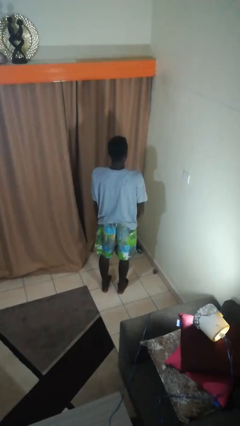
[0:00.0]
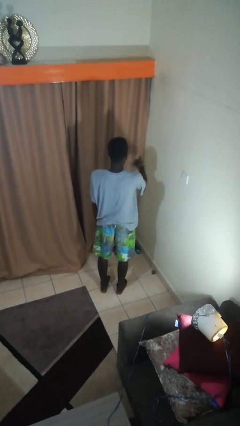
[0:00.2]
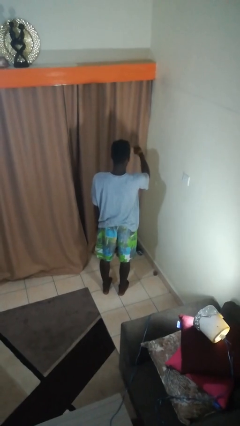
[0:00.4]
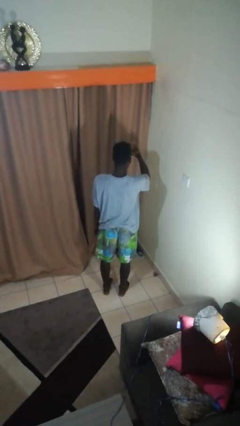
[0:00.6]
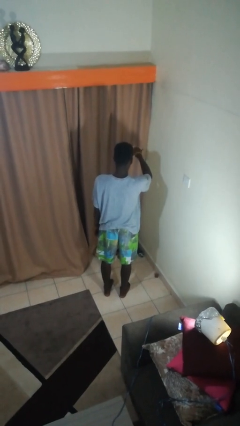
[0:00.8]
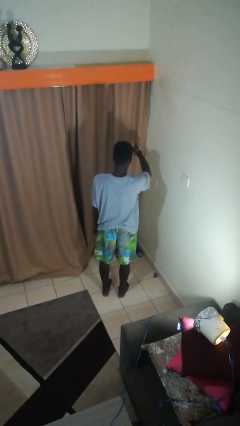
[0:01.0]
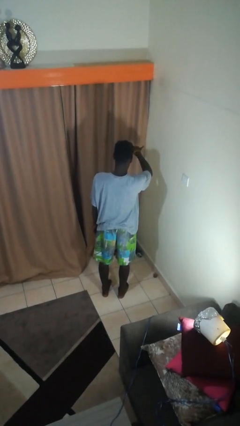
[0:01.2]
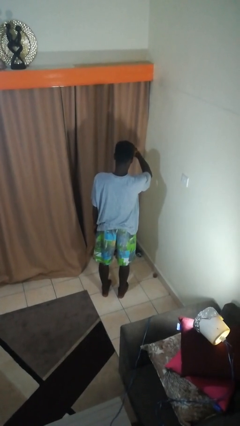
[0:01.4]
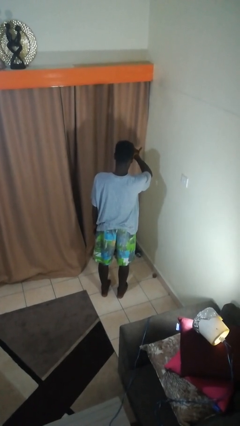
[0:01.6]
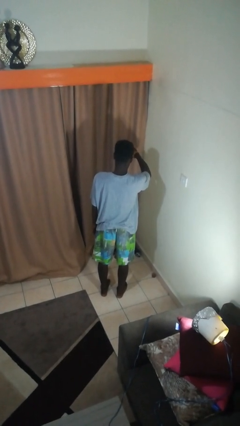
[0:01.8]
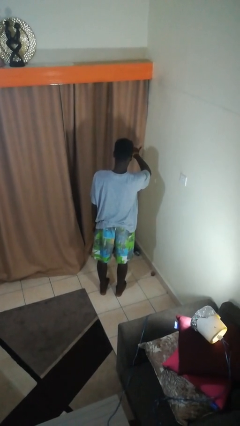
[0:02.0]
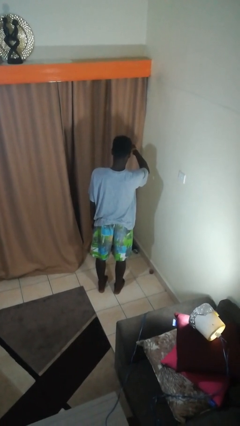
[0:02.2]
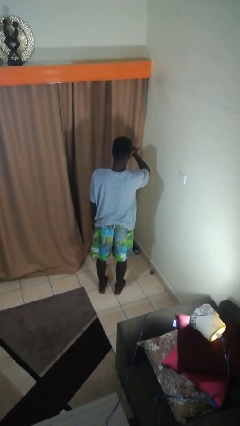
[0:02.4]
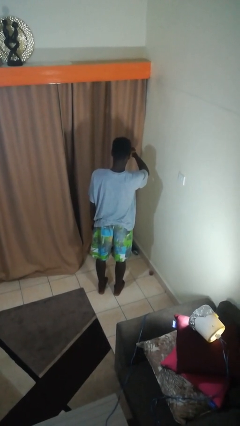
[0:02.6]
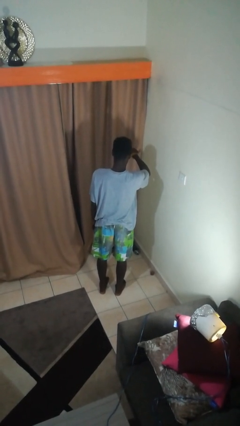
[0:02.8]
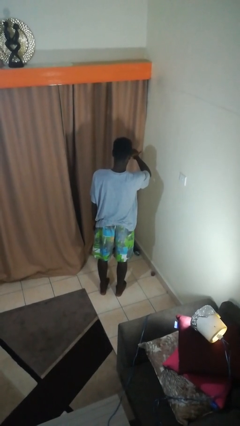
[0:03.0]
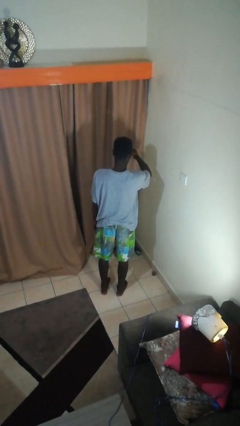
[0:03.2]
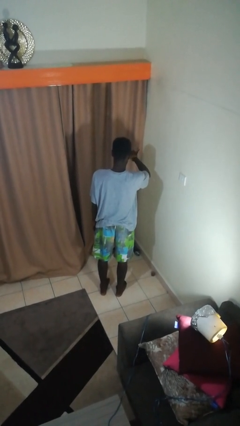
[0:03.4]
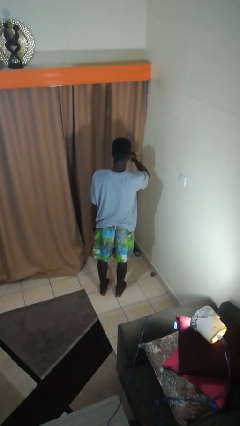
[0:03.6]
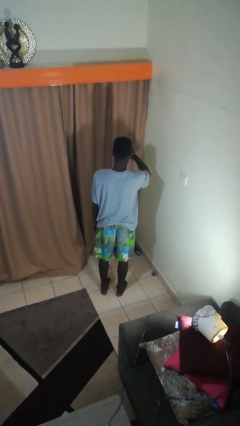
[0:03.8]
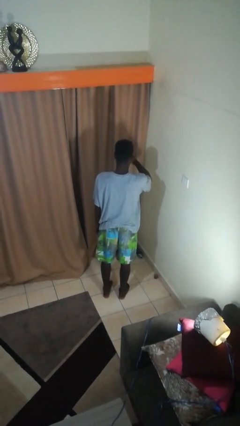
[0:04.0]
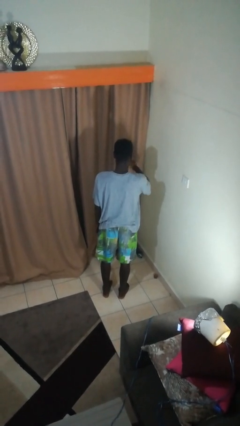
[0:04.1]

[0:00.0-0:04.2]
person gestures hang loose

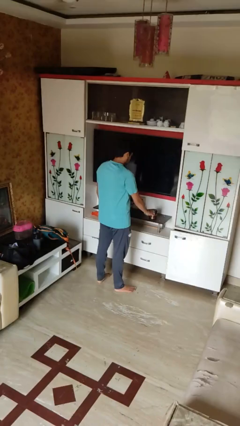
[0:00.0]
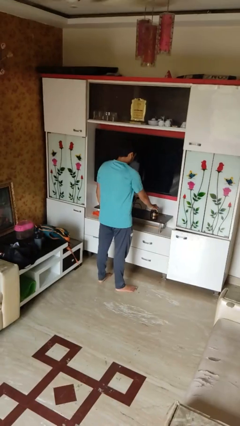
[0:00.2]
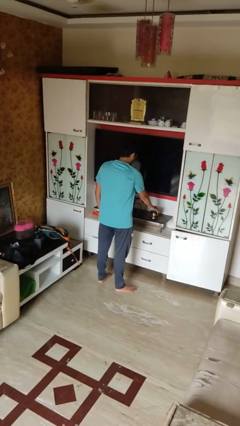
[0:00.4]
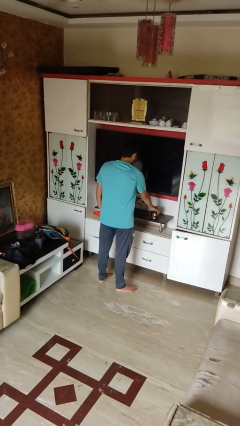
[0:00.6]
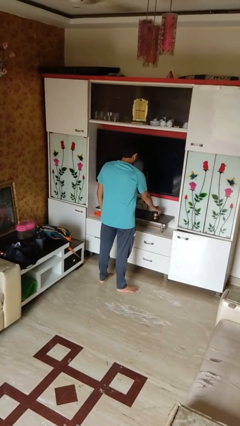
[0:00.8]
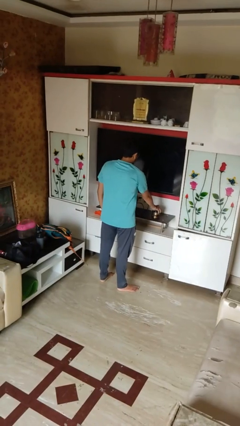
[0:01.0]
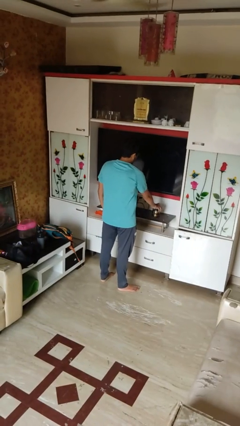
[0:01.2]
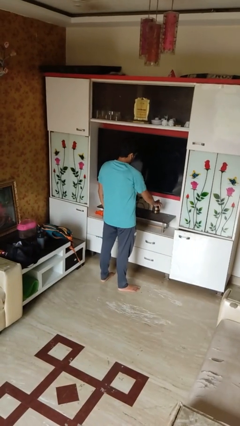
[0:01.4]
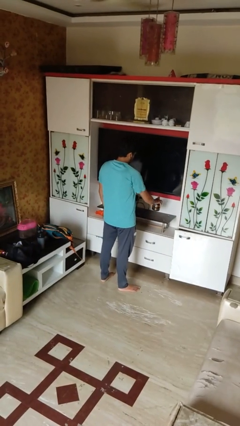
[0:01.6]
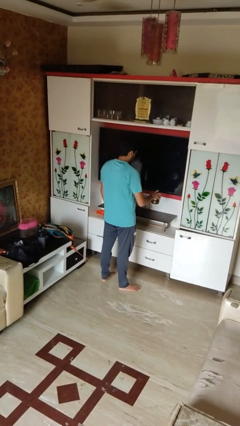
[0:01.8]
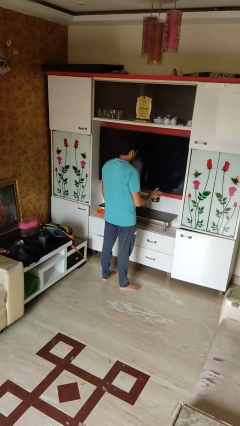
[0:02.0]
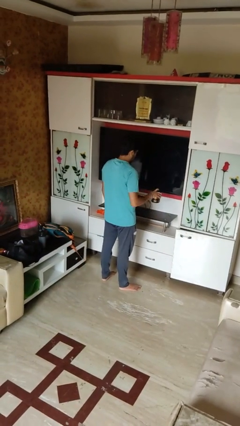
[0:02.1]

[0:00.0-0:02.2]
person picks up object from countertop

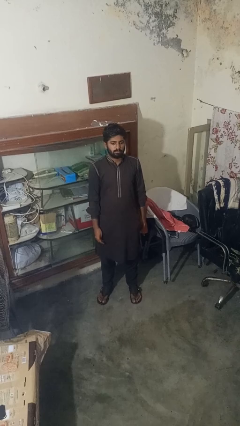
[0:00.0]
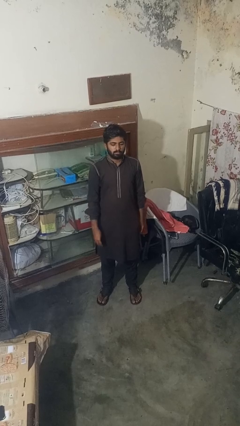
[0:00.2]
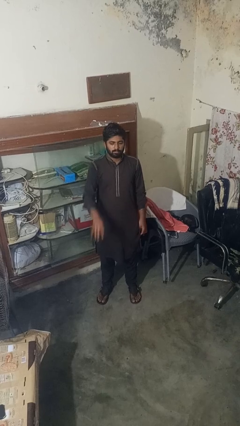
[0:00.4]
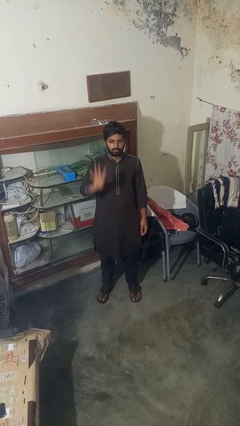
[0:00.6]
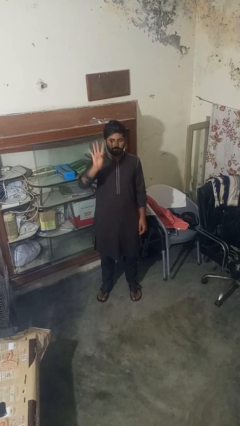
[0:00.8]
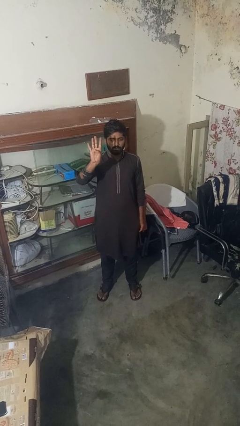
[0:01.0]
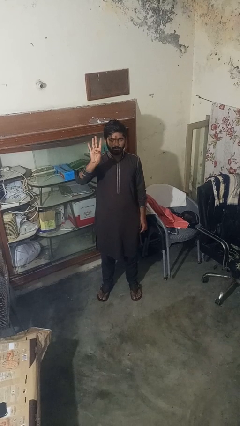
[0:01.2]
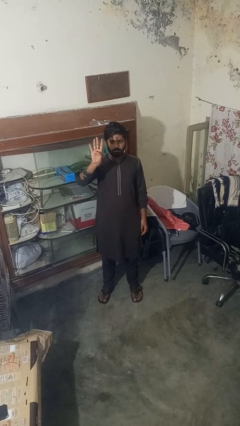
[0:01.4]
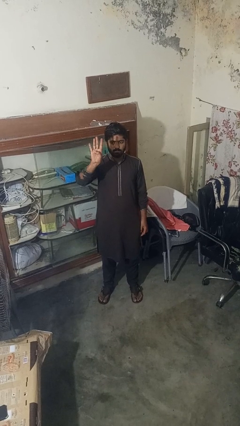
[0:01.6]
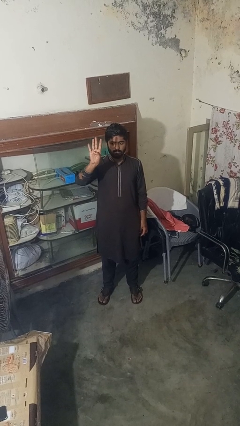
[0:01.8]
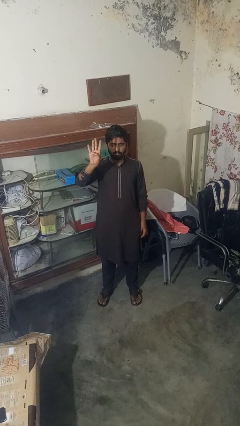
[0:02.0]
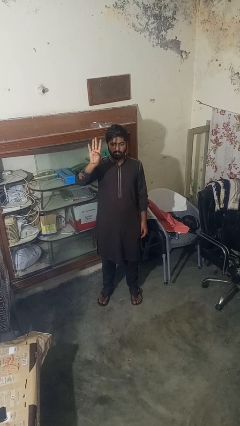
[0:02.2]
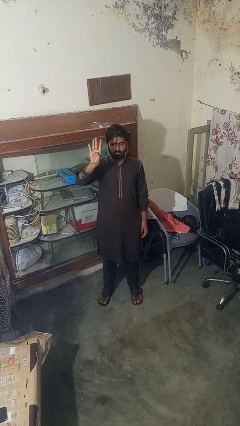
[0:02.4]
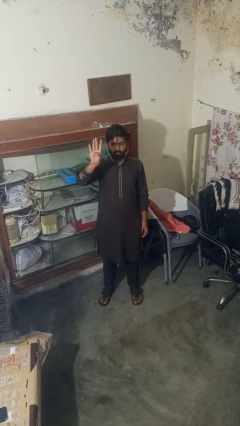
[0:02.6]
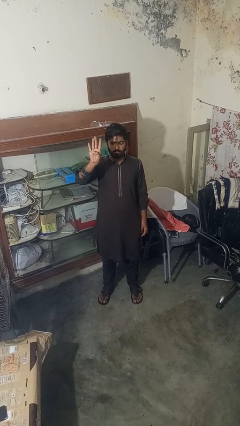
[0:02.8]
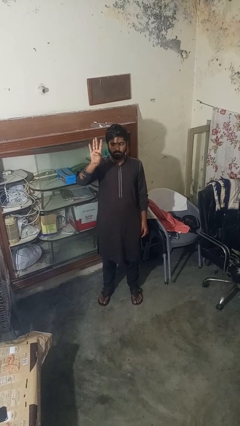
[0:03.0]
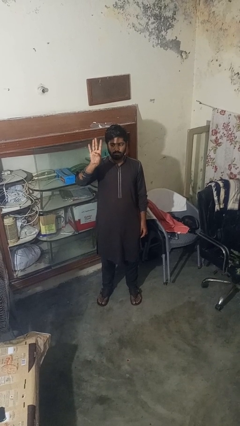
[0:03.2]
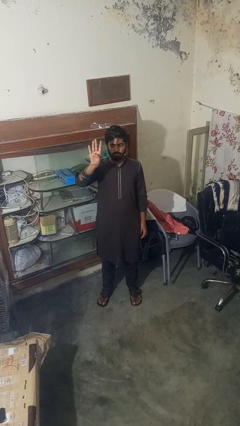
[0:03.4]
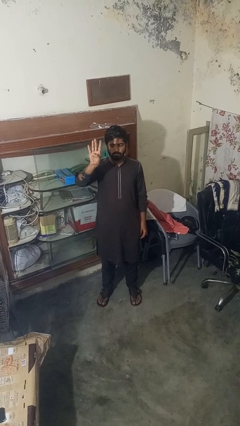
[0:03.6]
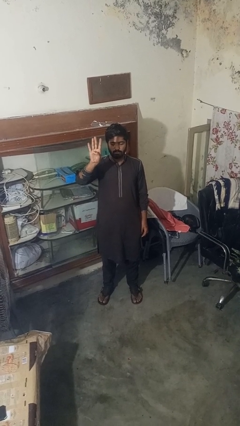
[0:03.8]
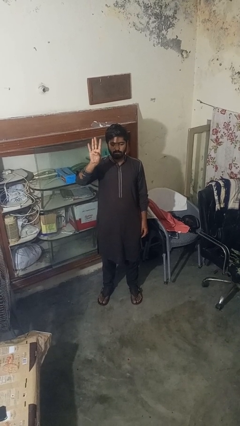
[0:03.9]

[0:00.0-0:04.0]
person gestures number four

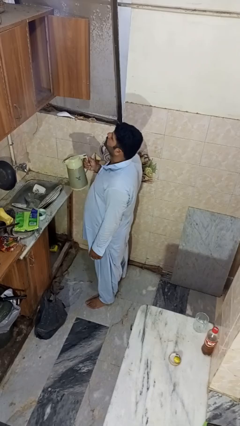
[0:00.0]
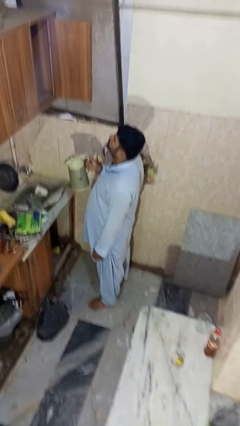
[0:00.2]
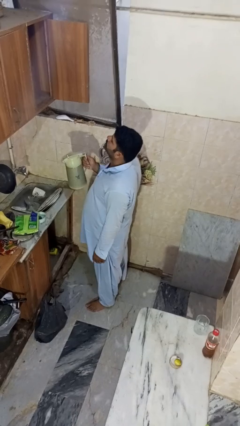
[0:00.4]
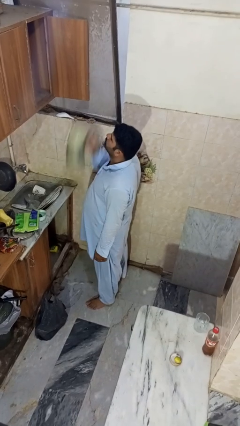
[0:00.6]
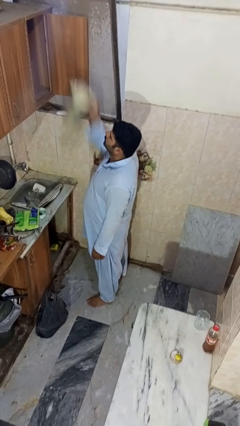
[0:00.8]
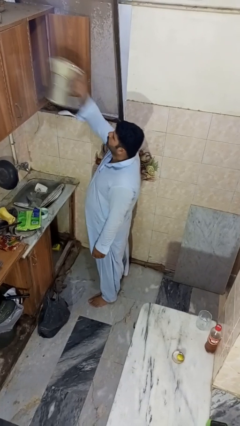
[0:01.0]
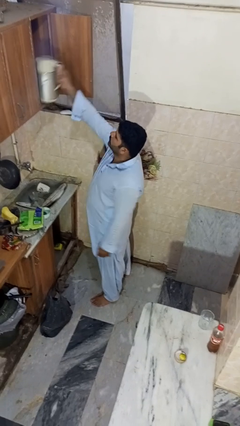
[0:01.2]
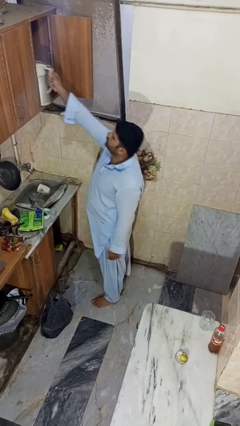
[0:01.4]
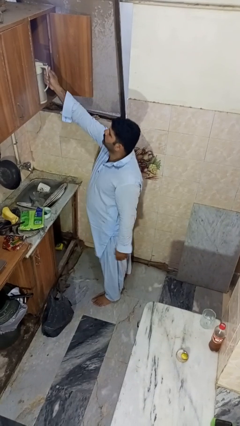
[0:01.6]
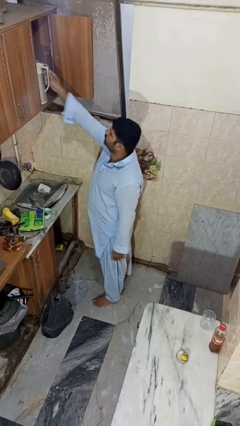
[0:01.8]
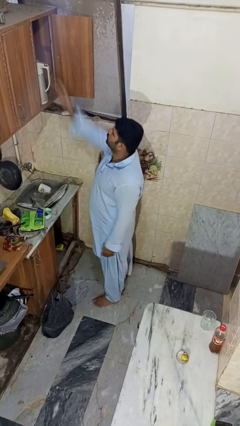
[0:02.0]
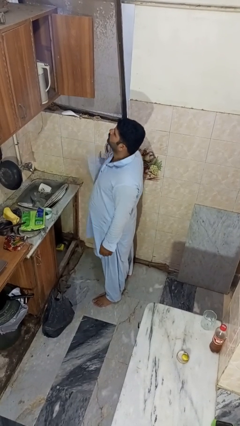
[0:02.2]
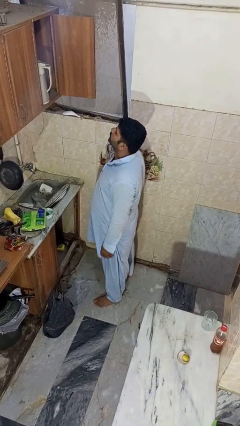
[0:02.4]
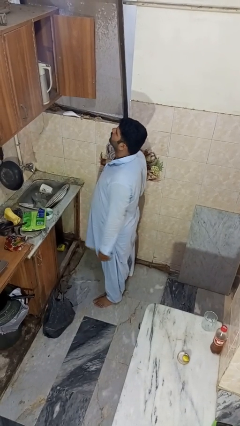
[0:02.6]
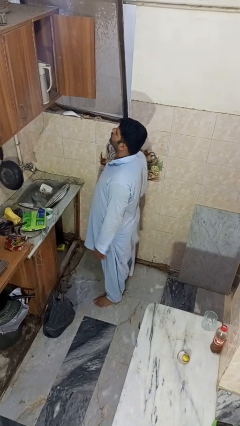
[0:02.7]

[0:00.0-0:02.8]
person puts object in cabinet

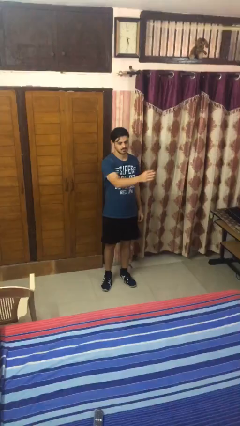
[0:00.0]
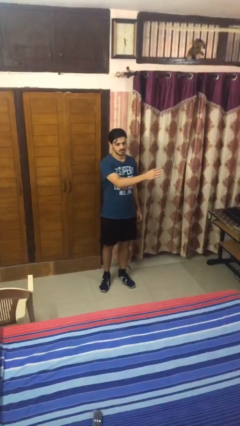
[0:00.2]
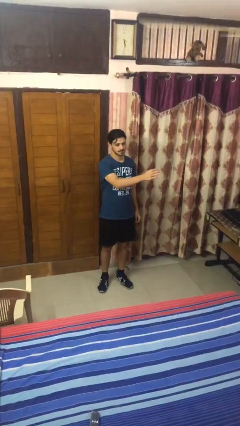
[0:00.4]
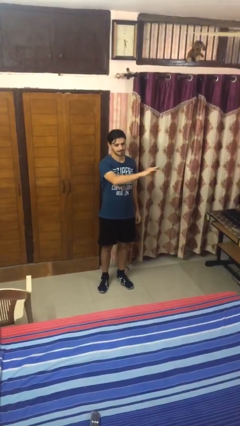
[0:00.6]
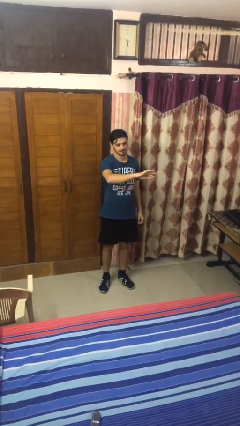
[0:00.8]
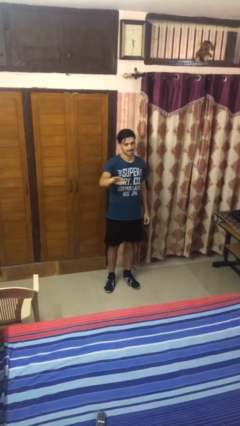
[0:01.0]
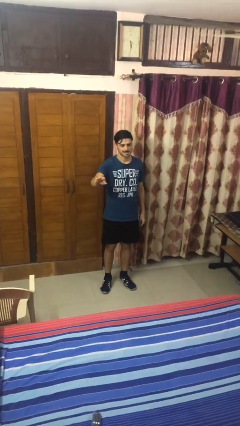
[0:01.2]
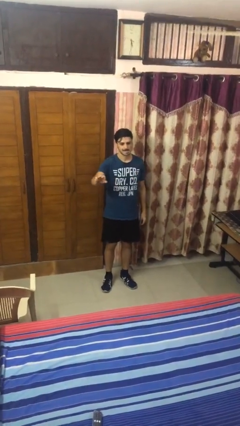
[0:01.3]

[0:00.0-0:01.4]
person gestures swipe right

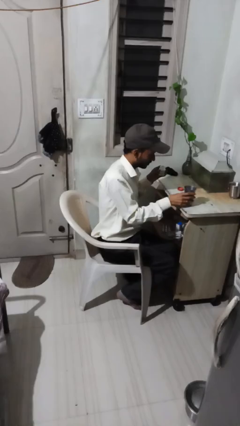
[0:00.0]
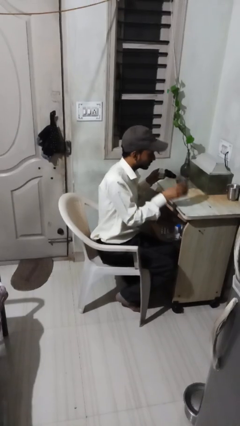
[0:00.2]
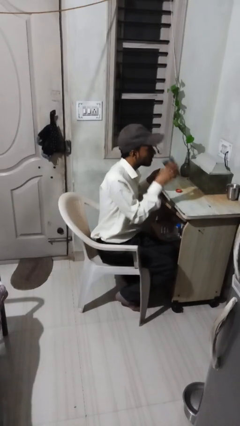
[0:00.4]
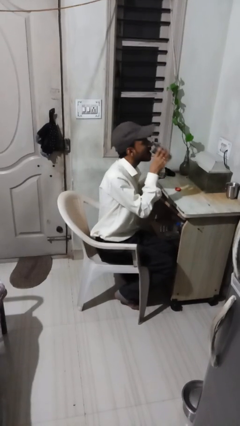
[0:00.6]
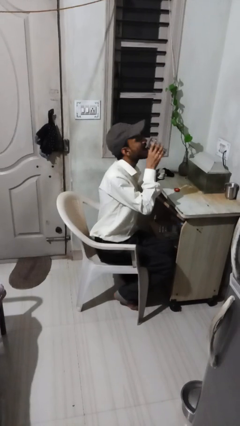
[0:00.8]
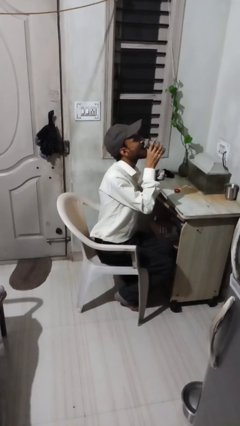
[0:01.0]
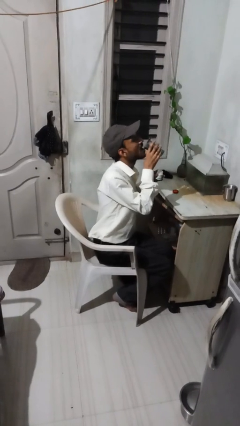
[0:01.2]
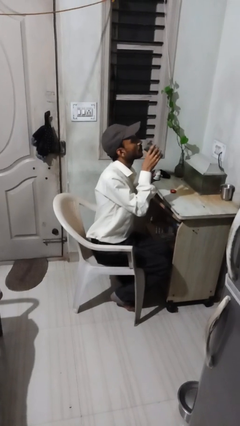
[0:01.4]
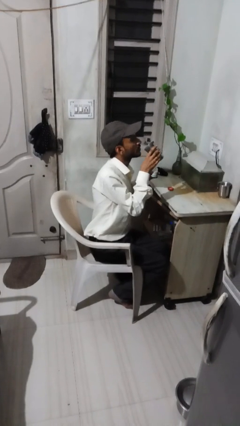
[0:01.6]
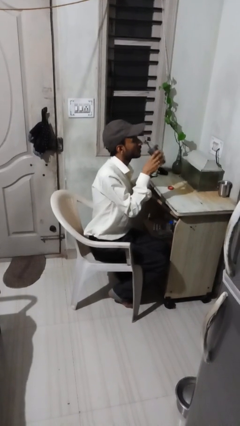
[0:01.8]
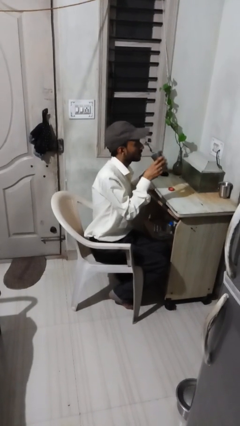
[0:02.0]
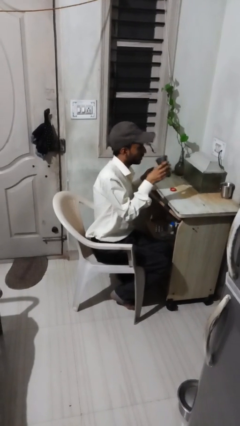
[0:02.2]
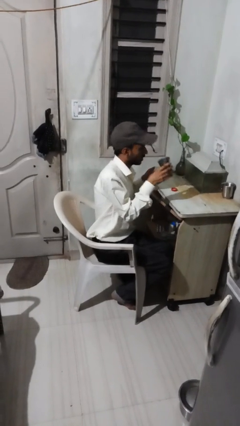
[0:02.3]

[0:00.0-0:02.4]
person drinks from cup

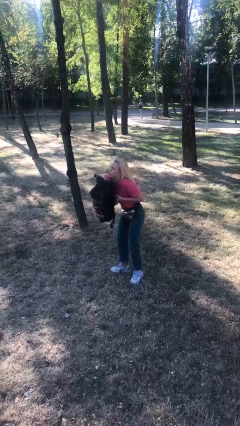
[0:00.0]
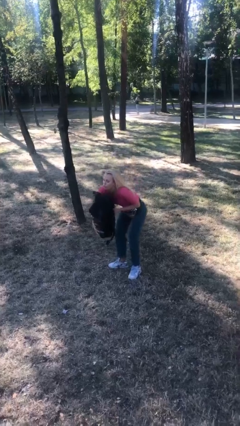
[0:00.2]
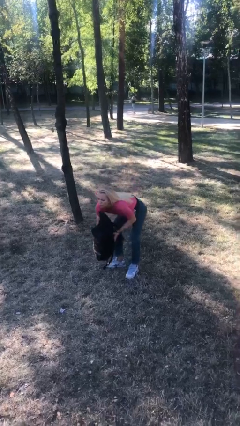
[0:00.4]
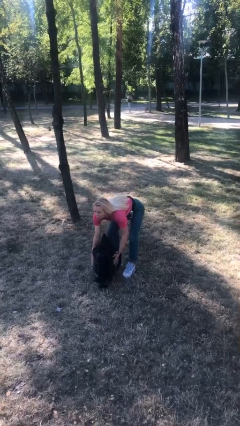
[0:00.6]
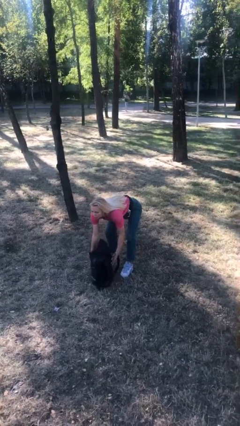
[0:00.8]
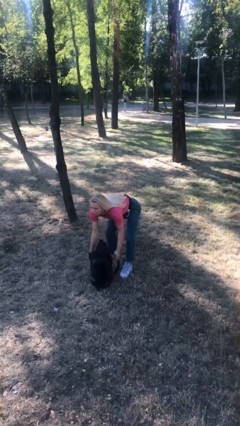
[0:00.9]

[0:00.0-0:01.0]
person puts down object on floor
